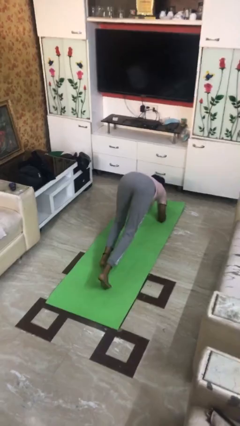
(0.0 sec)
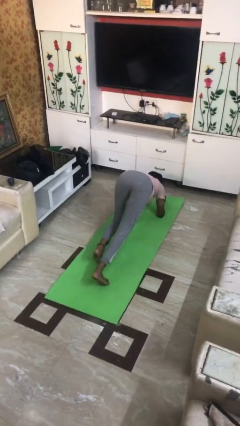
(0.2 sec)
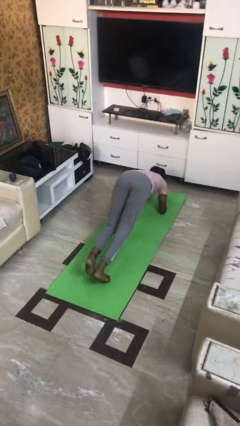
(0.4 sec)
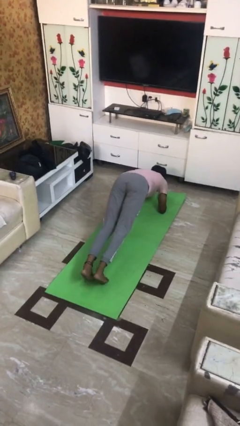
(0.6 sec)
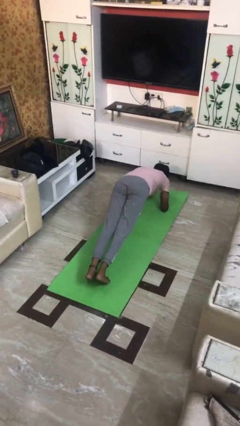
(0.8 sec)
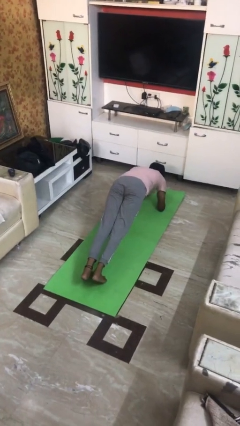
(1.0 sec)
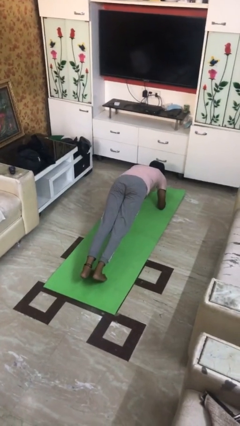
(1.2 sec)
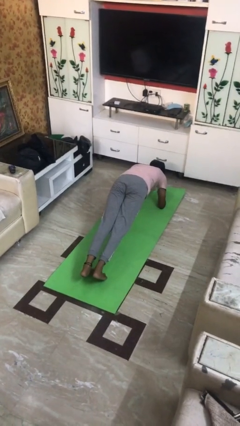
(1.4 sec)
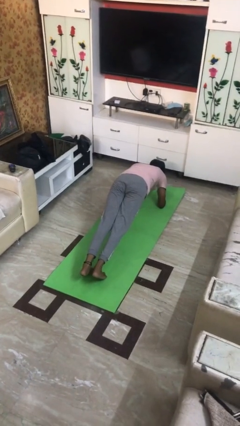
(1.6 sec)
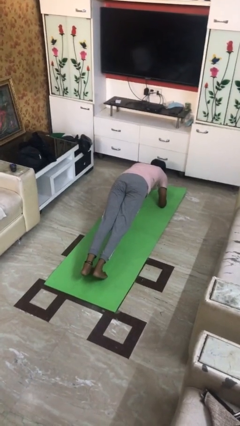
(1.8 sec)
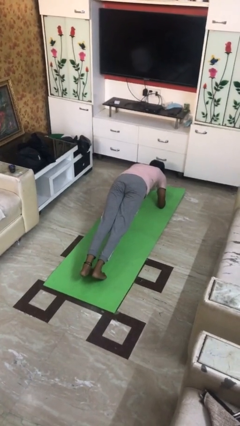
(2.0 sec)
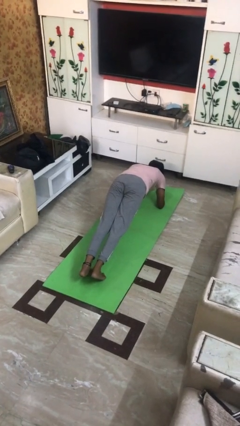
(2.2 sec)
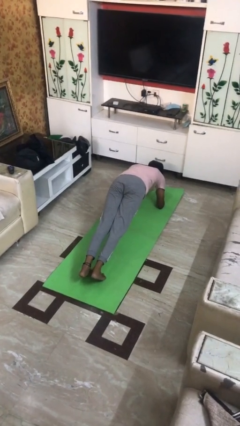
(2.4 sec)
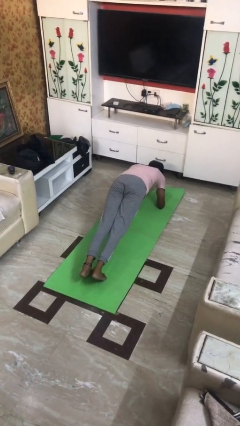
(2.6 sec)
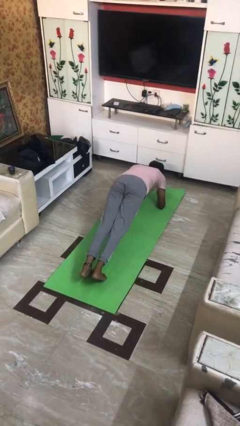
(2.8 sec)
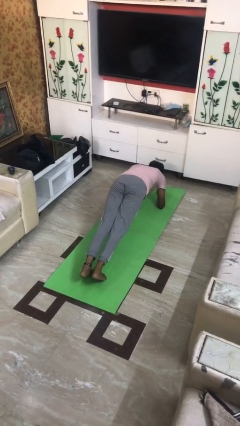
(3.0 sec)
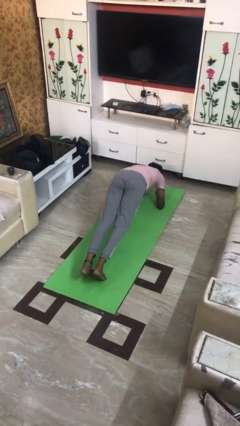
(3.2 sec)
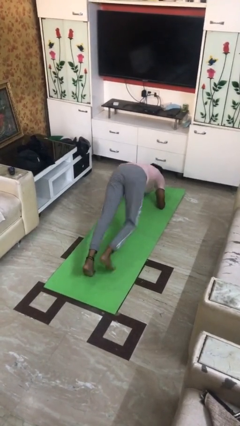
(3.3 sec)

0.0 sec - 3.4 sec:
person exercises with plank

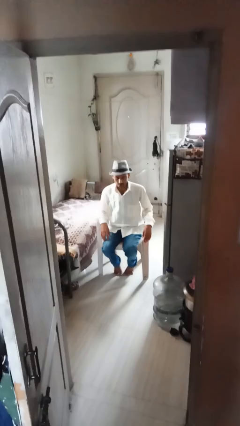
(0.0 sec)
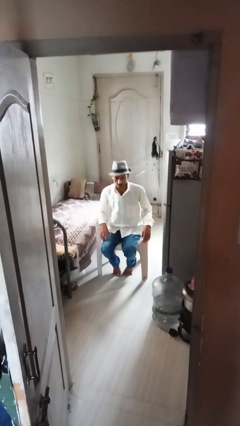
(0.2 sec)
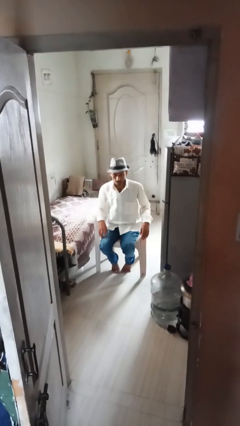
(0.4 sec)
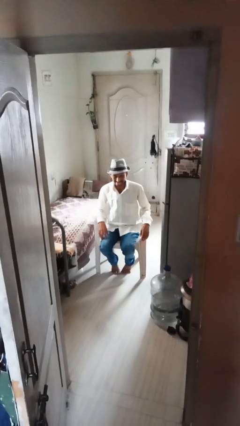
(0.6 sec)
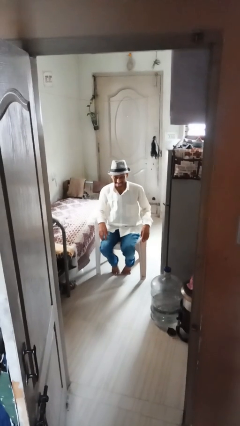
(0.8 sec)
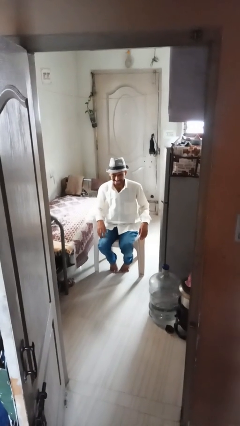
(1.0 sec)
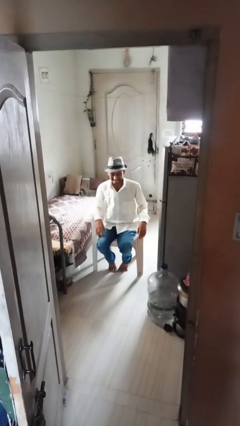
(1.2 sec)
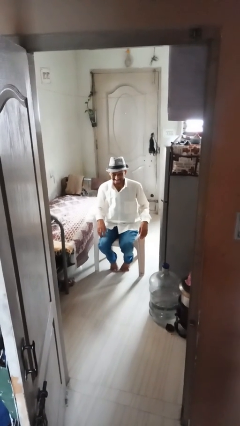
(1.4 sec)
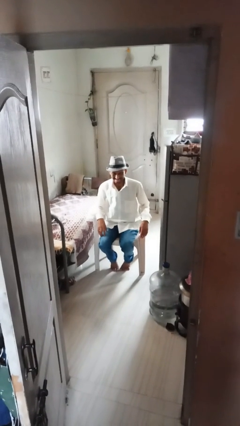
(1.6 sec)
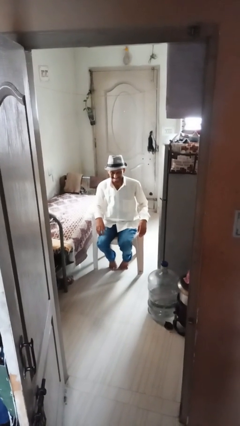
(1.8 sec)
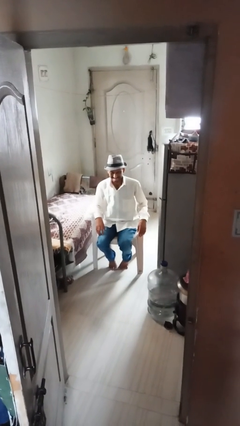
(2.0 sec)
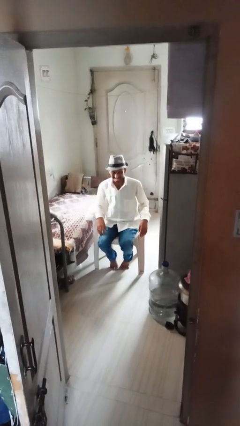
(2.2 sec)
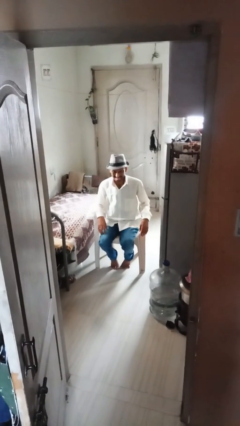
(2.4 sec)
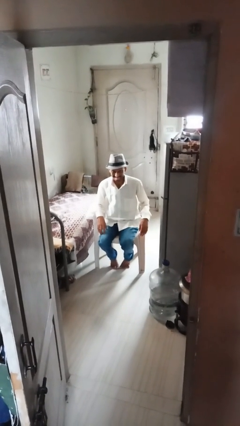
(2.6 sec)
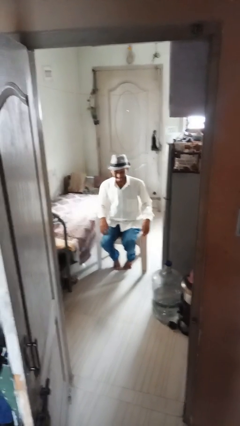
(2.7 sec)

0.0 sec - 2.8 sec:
person sticks out tongue

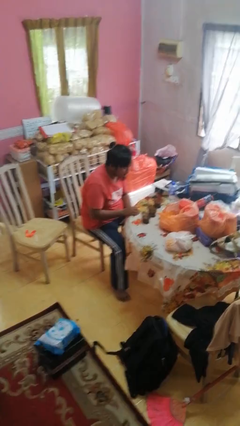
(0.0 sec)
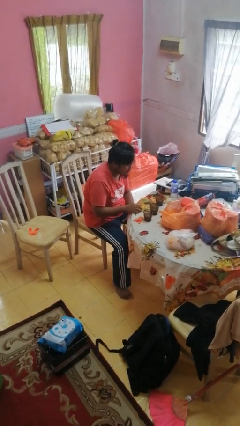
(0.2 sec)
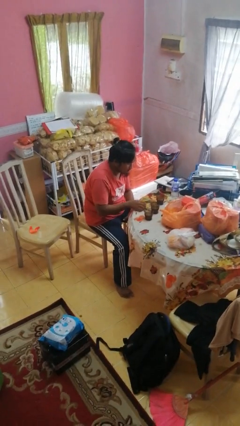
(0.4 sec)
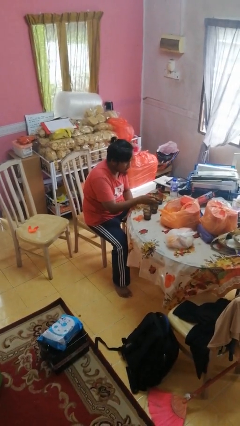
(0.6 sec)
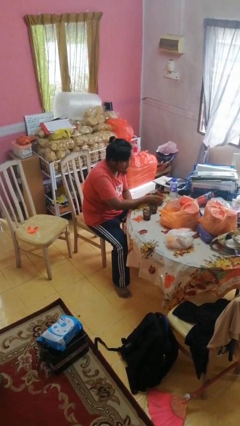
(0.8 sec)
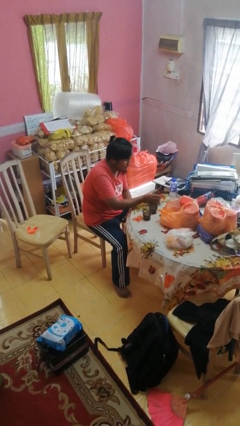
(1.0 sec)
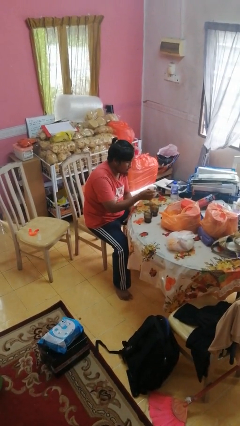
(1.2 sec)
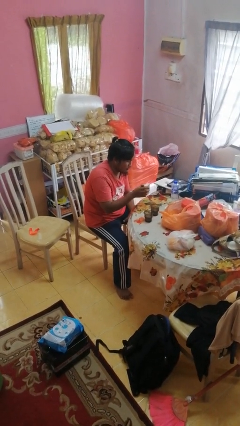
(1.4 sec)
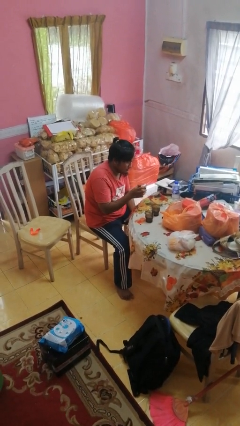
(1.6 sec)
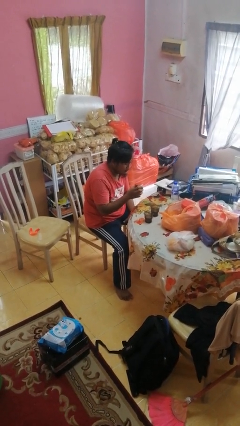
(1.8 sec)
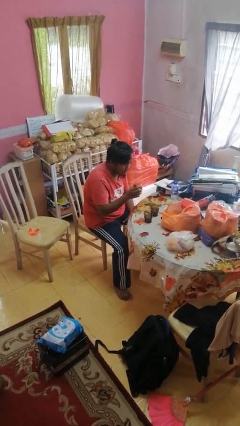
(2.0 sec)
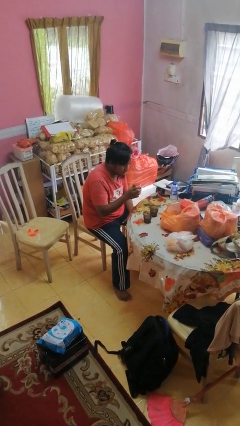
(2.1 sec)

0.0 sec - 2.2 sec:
person picks up object from table

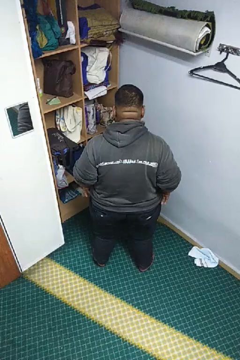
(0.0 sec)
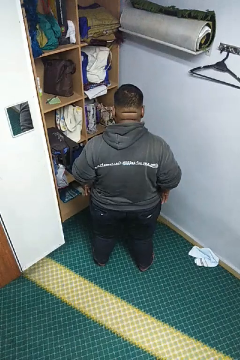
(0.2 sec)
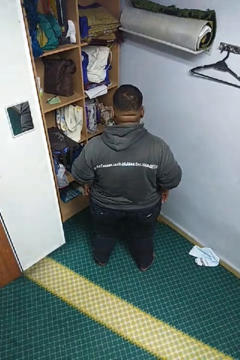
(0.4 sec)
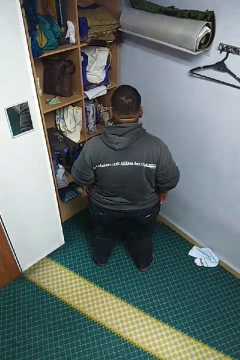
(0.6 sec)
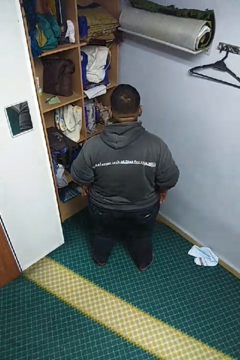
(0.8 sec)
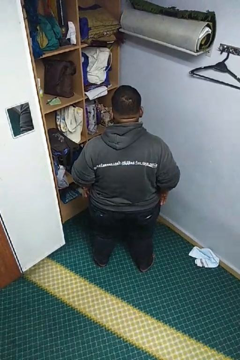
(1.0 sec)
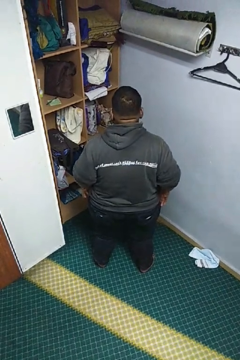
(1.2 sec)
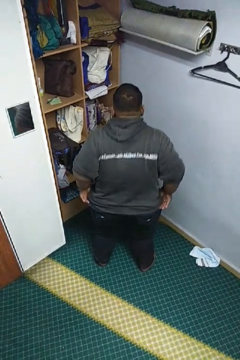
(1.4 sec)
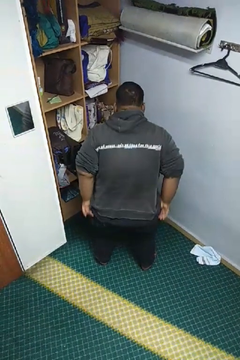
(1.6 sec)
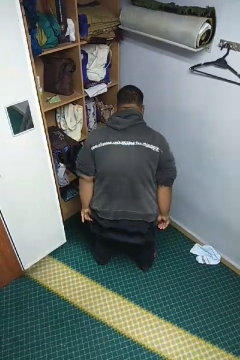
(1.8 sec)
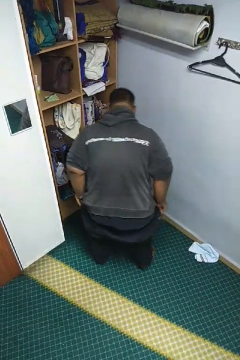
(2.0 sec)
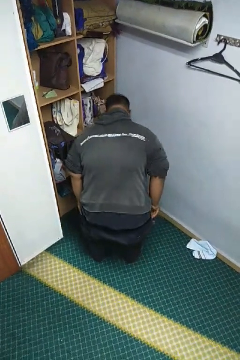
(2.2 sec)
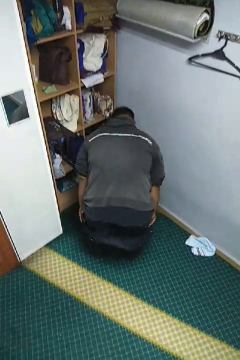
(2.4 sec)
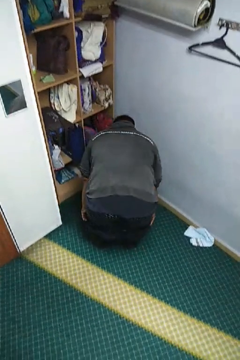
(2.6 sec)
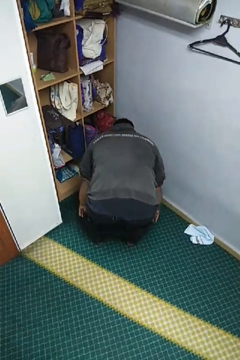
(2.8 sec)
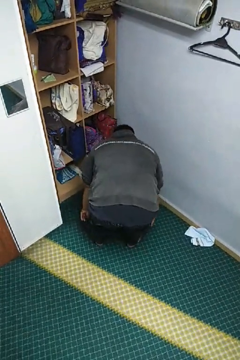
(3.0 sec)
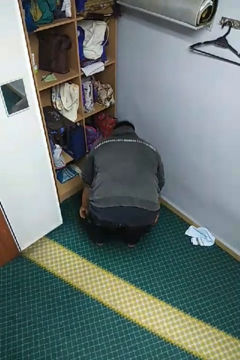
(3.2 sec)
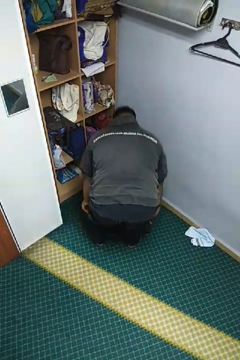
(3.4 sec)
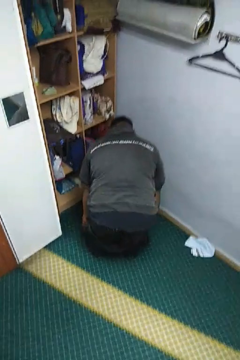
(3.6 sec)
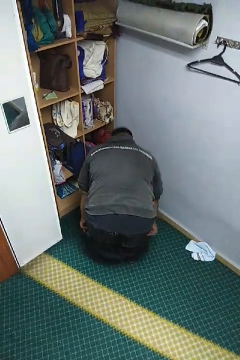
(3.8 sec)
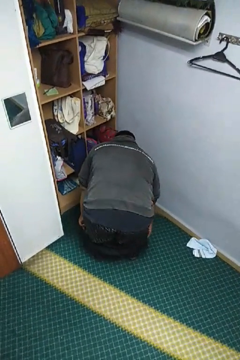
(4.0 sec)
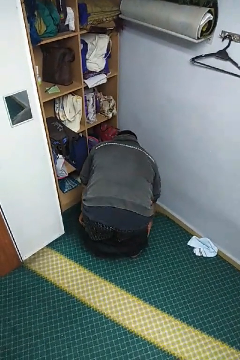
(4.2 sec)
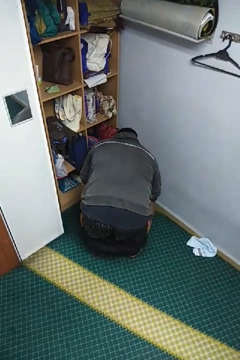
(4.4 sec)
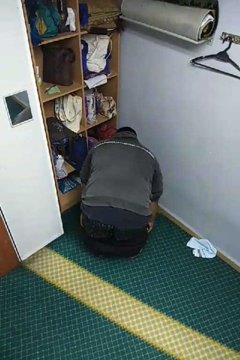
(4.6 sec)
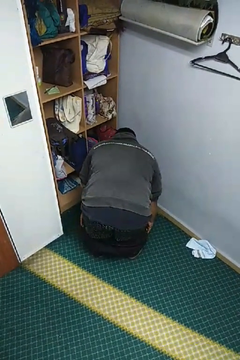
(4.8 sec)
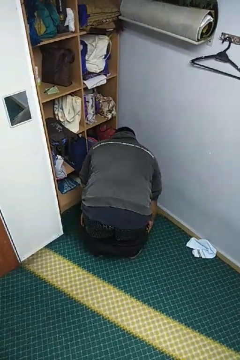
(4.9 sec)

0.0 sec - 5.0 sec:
person takes off pants

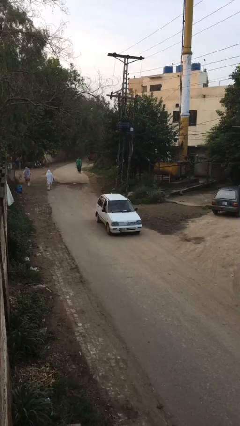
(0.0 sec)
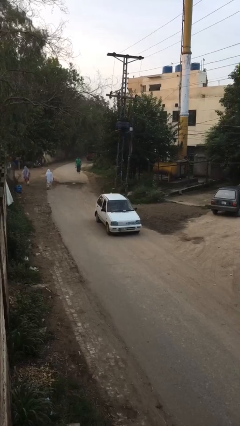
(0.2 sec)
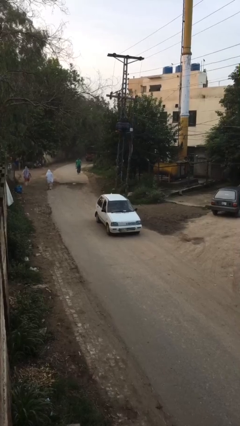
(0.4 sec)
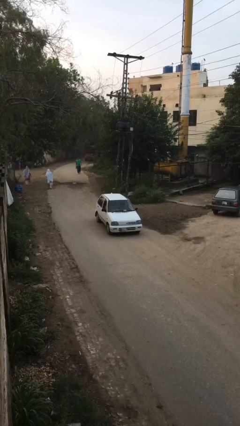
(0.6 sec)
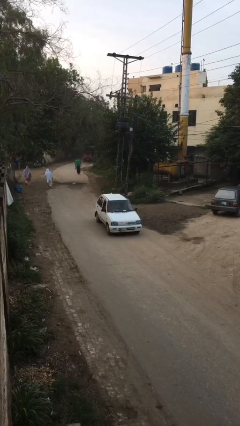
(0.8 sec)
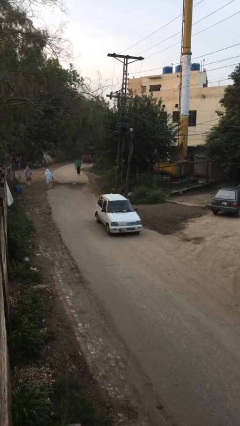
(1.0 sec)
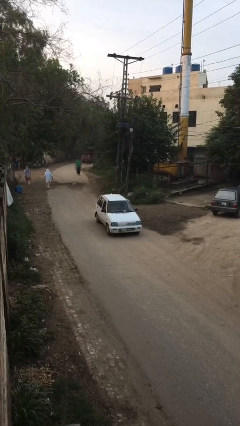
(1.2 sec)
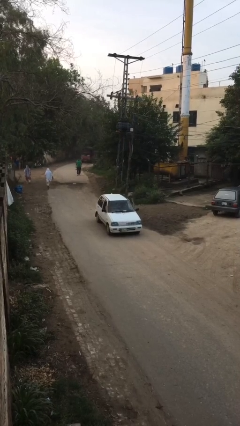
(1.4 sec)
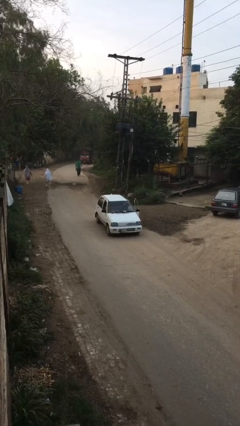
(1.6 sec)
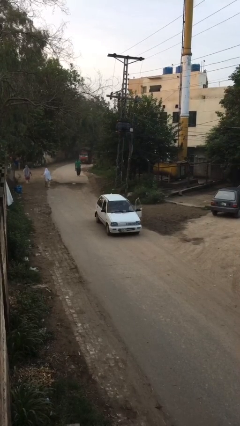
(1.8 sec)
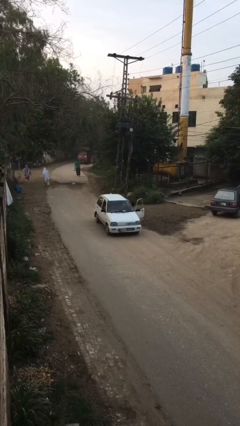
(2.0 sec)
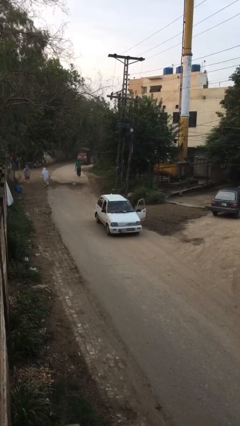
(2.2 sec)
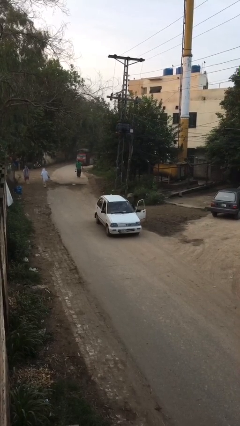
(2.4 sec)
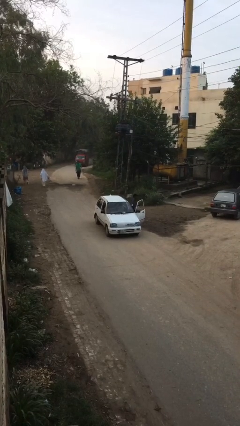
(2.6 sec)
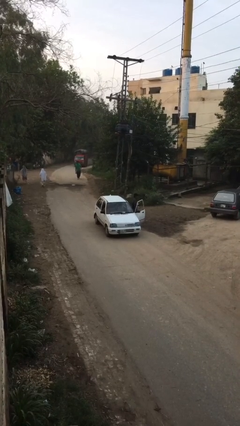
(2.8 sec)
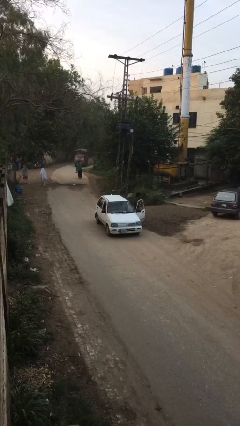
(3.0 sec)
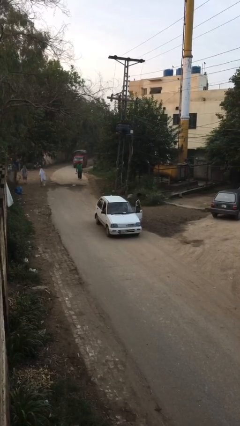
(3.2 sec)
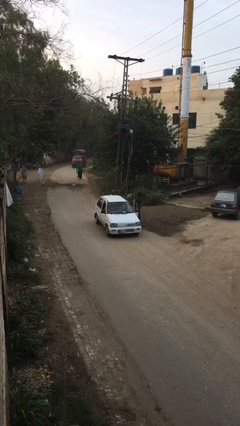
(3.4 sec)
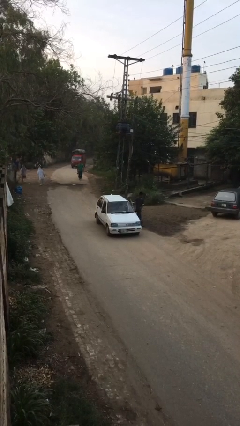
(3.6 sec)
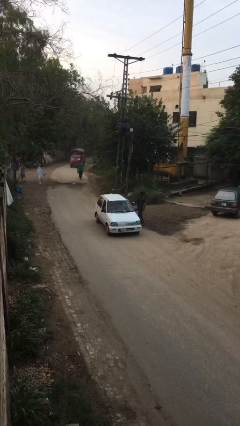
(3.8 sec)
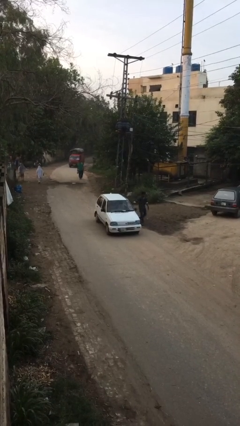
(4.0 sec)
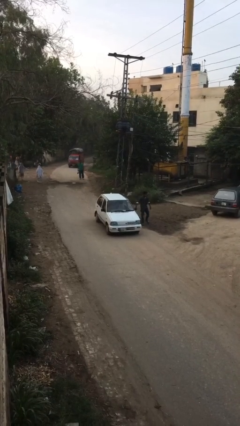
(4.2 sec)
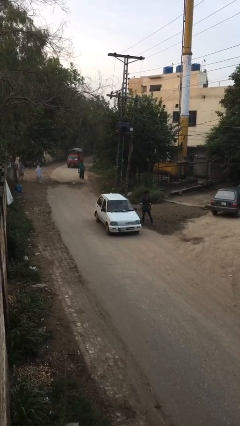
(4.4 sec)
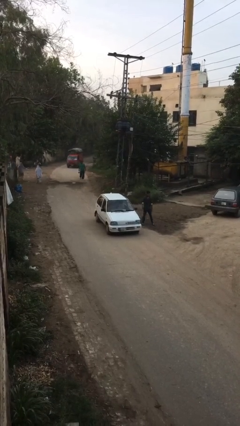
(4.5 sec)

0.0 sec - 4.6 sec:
car drops off person

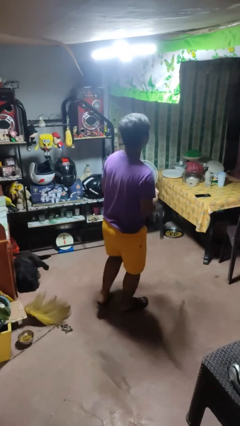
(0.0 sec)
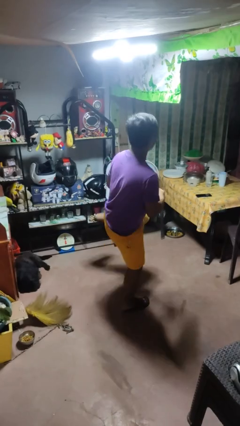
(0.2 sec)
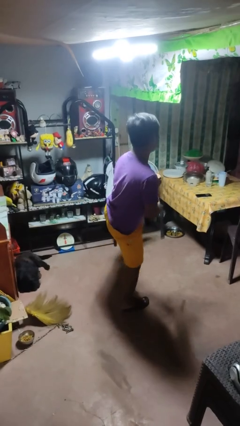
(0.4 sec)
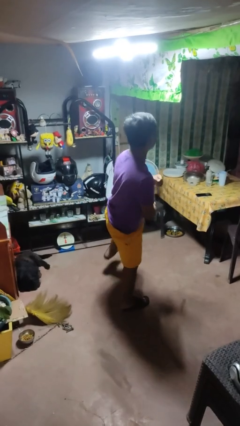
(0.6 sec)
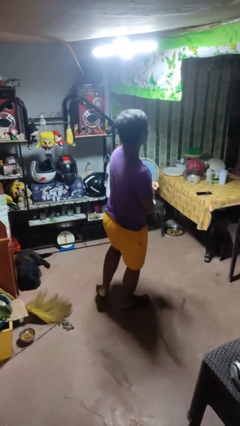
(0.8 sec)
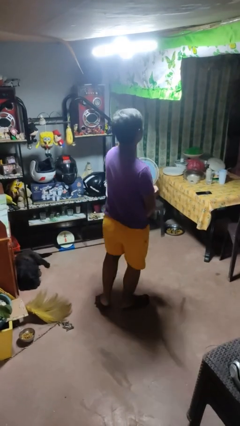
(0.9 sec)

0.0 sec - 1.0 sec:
person karate kicks
